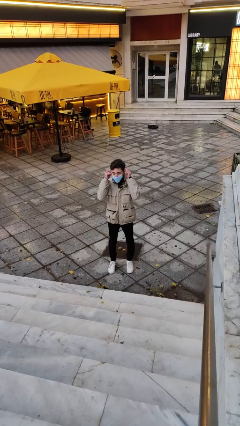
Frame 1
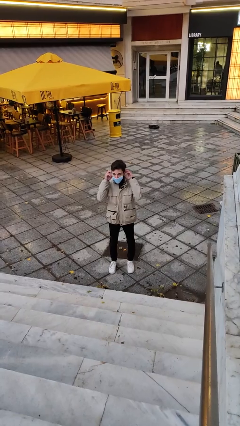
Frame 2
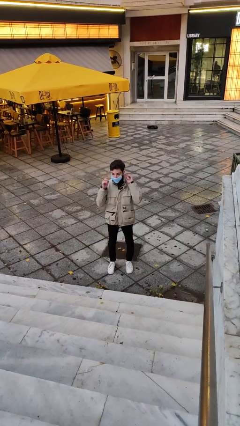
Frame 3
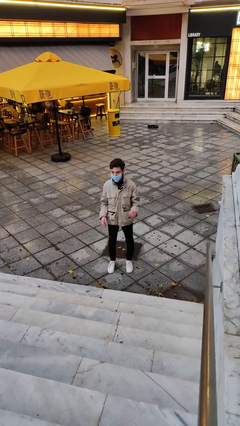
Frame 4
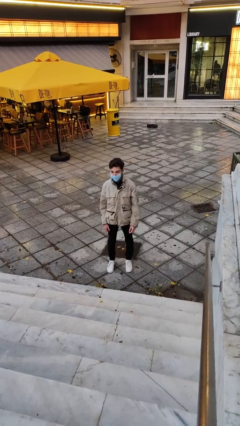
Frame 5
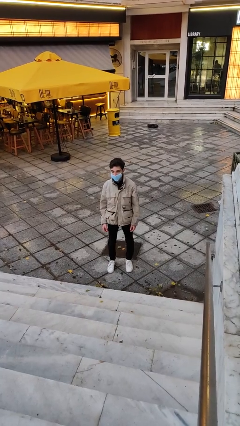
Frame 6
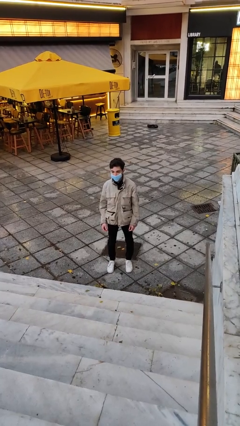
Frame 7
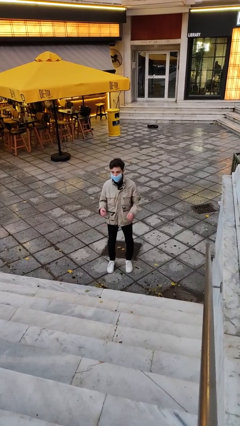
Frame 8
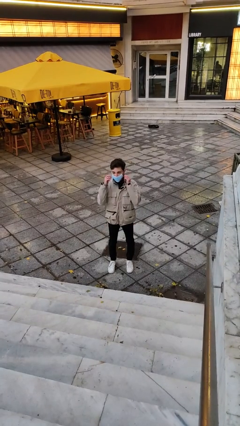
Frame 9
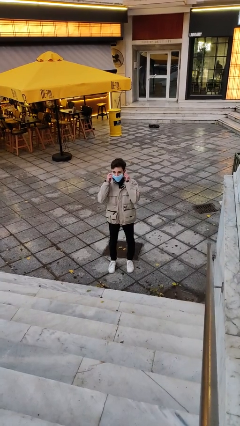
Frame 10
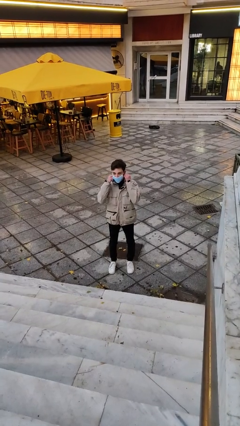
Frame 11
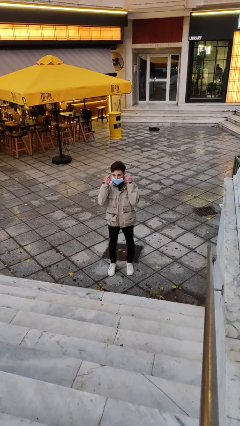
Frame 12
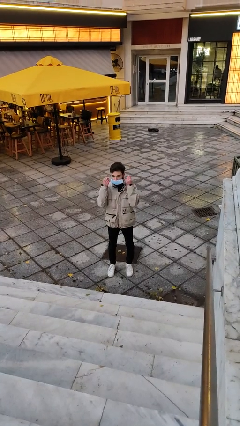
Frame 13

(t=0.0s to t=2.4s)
person puts on facemask

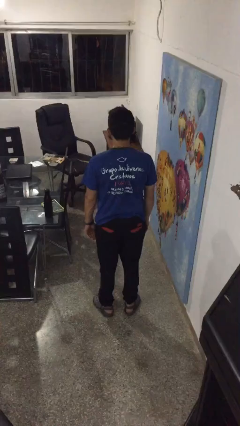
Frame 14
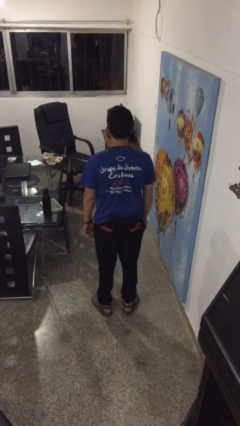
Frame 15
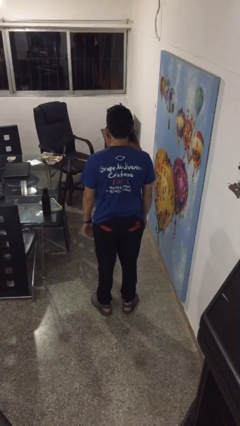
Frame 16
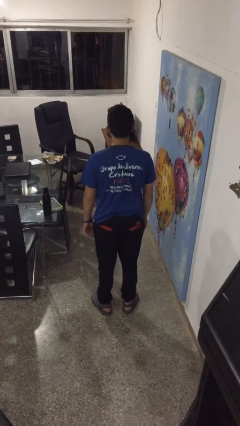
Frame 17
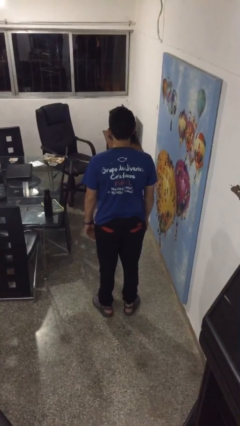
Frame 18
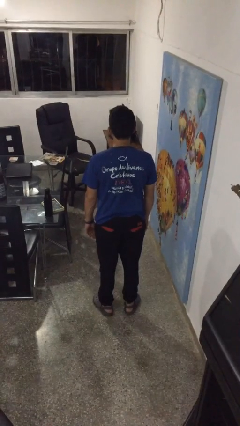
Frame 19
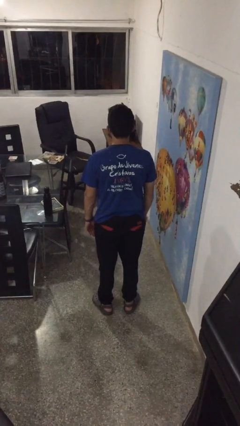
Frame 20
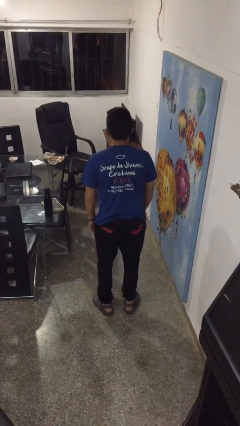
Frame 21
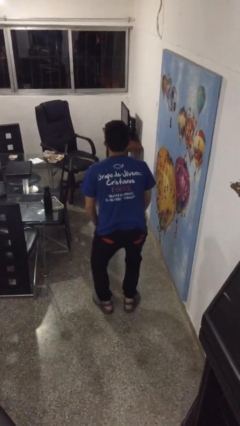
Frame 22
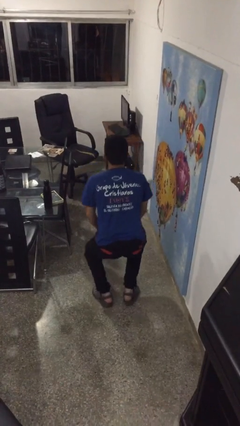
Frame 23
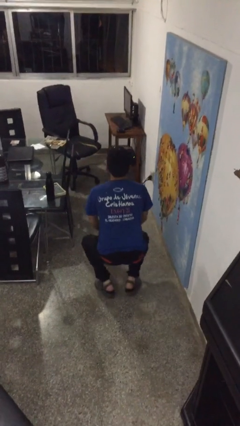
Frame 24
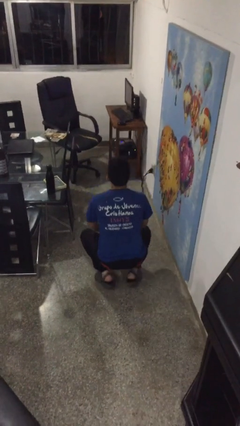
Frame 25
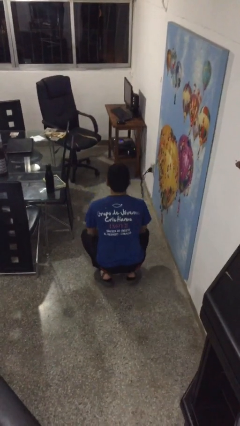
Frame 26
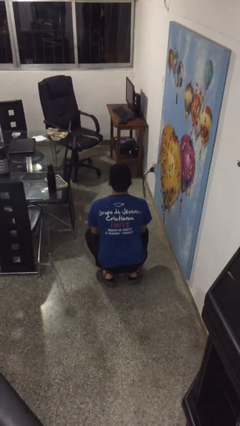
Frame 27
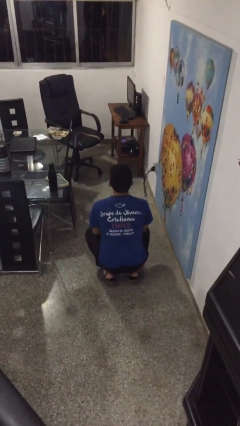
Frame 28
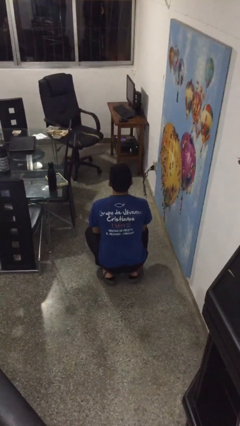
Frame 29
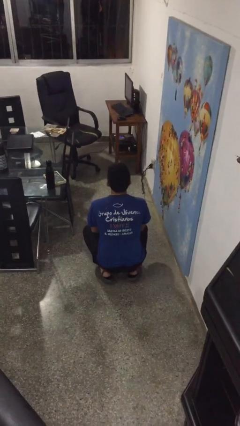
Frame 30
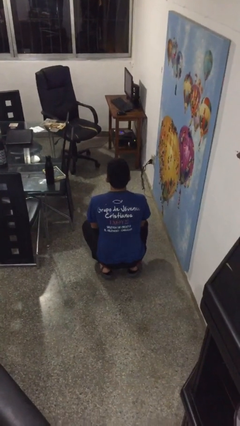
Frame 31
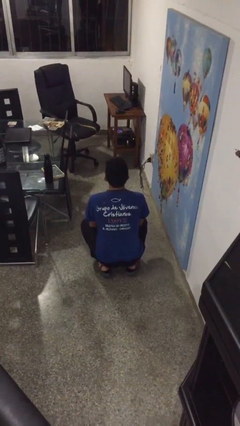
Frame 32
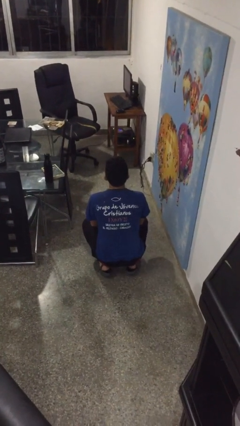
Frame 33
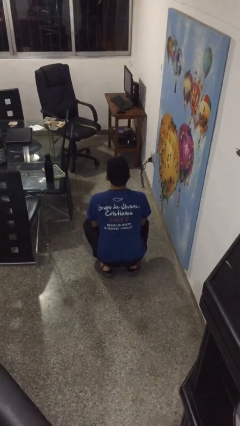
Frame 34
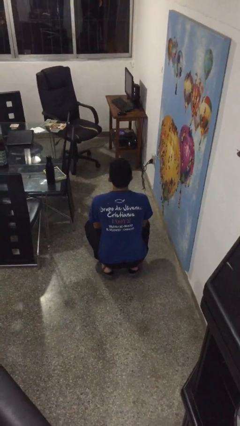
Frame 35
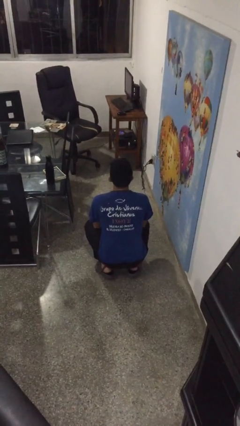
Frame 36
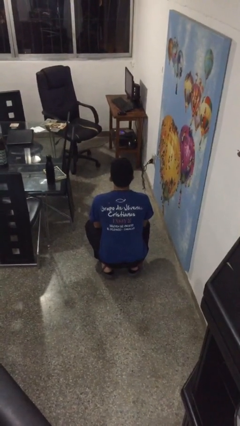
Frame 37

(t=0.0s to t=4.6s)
person squats

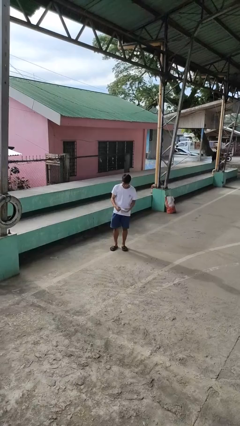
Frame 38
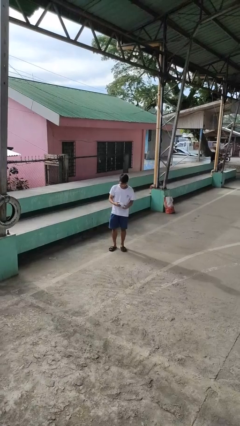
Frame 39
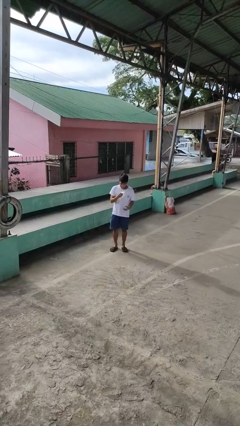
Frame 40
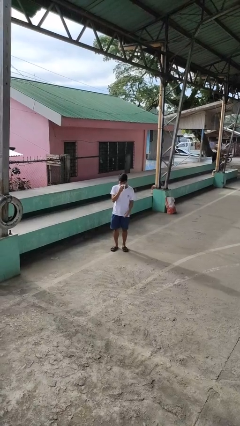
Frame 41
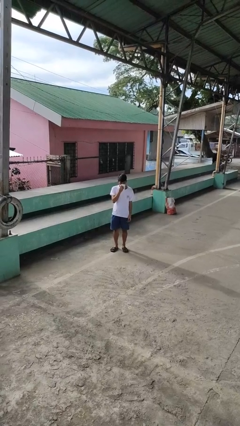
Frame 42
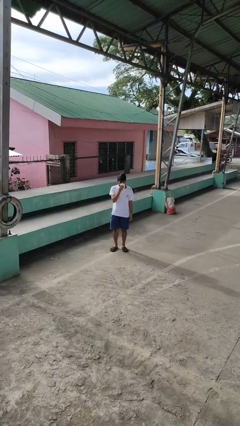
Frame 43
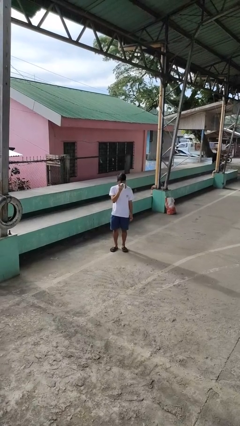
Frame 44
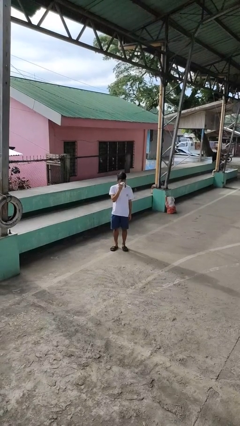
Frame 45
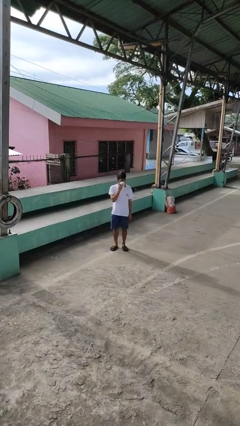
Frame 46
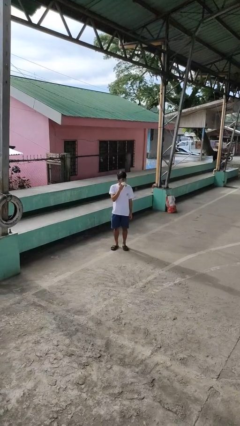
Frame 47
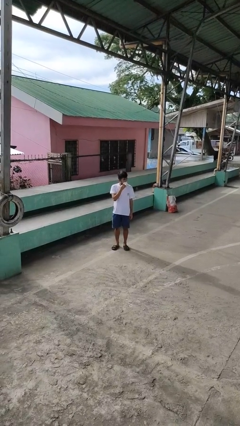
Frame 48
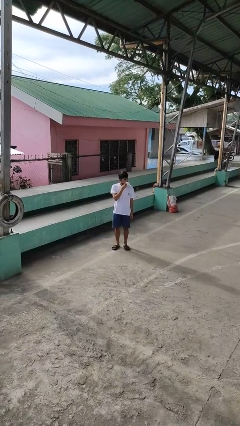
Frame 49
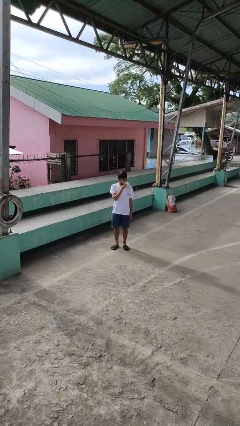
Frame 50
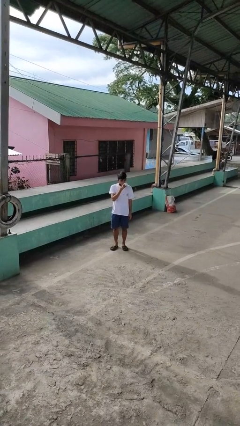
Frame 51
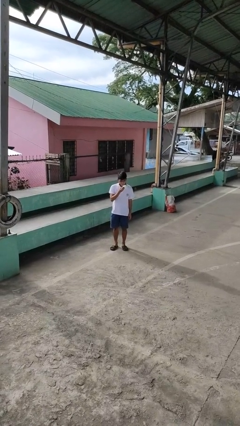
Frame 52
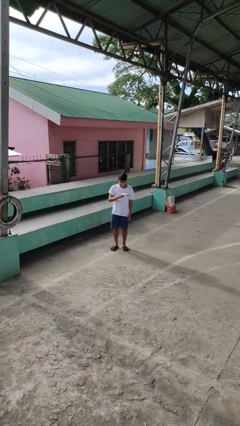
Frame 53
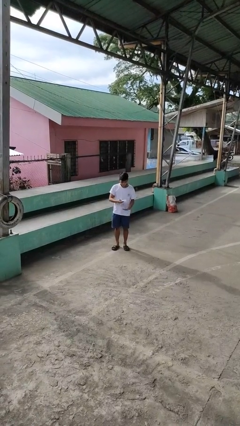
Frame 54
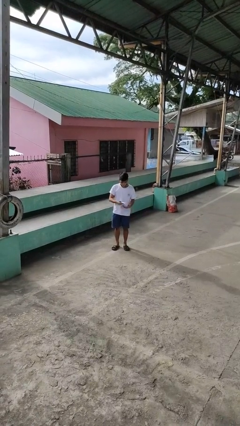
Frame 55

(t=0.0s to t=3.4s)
person wipes mouth with napkin

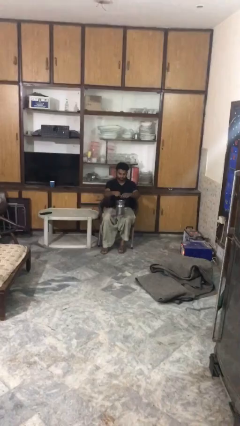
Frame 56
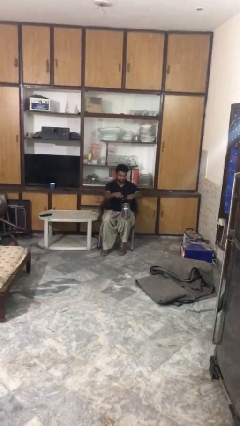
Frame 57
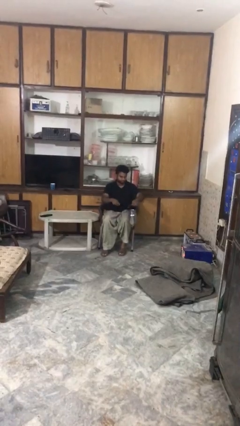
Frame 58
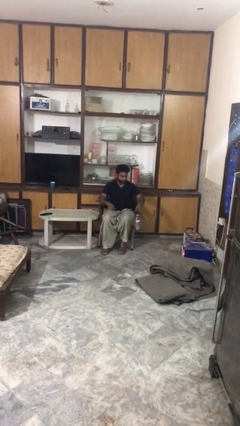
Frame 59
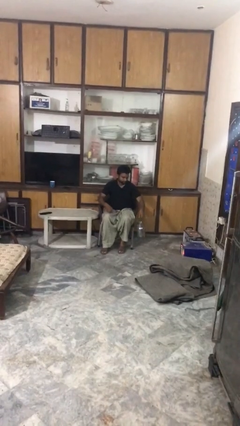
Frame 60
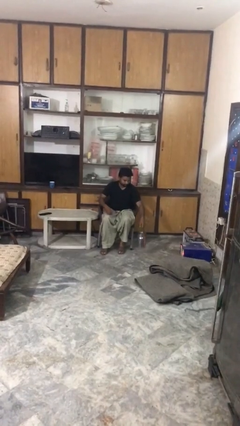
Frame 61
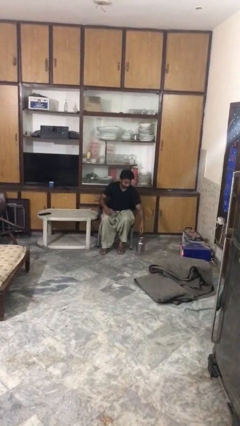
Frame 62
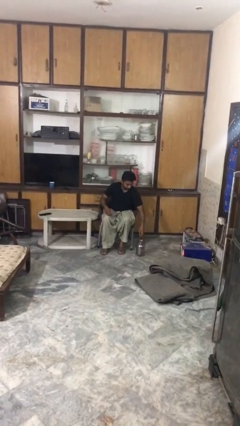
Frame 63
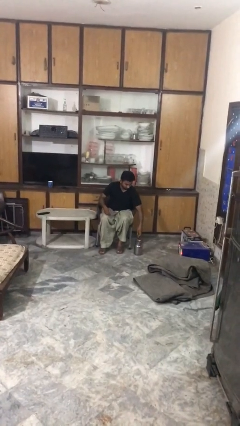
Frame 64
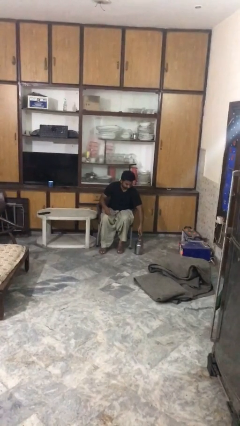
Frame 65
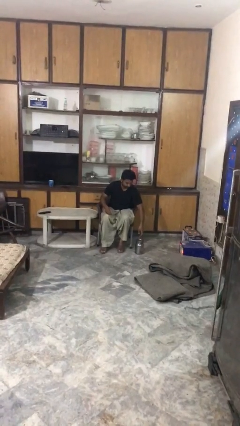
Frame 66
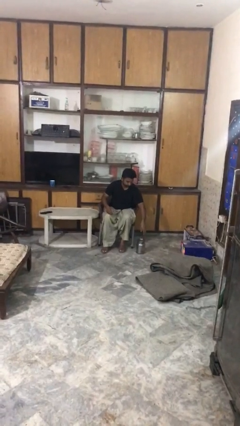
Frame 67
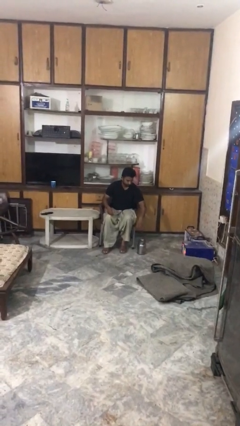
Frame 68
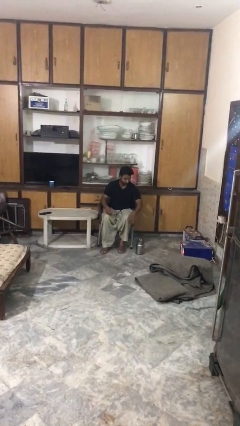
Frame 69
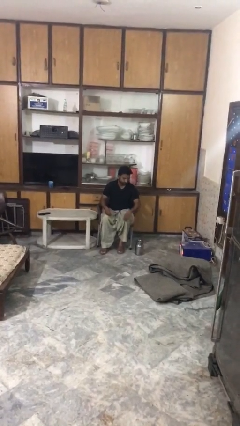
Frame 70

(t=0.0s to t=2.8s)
person puts down object on floor

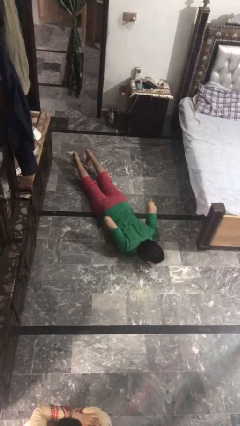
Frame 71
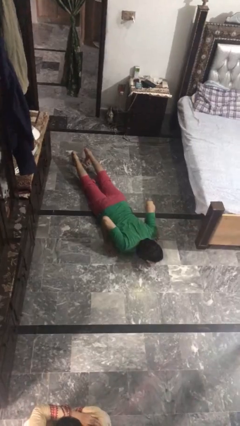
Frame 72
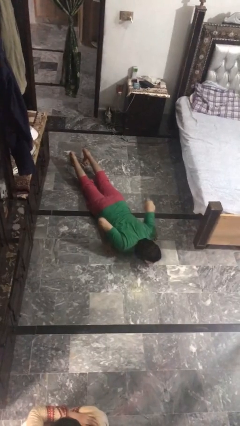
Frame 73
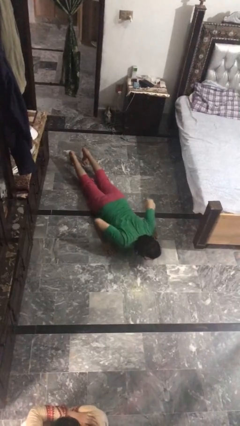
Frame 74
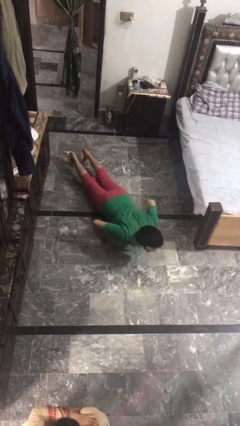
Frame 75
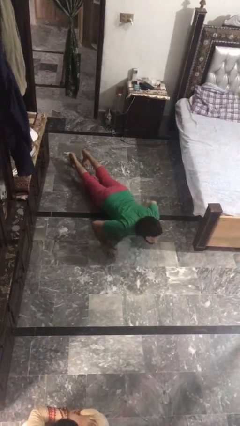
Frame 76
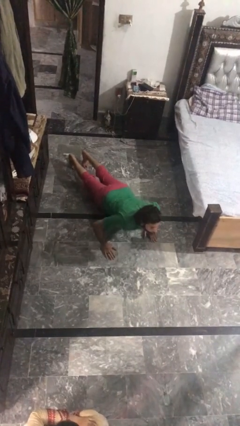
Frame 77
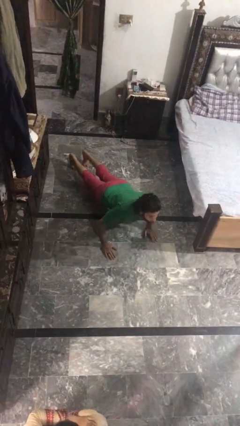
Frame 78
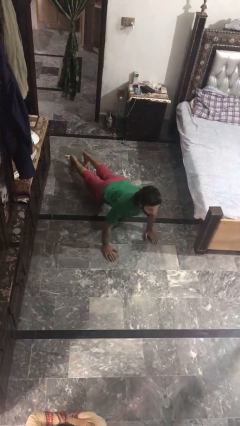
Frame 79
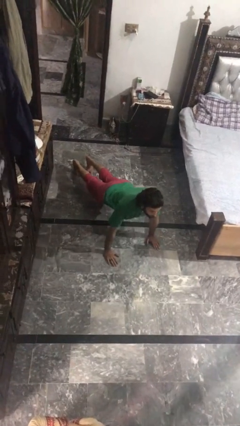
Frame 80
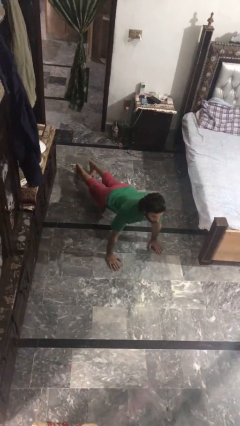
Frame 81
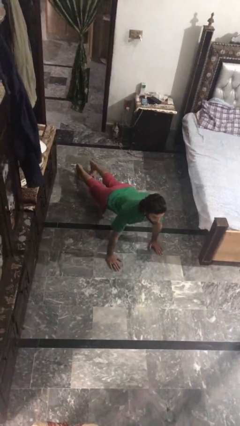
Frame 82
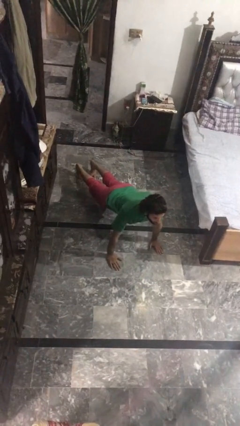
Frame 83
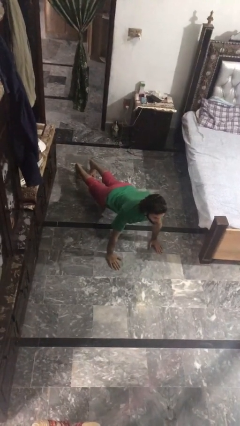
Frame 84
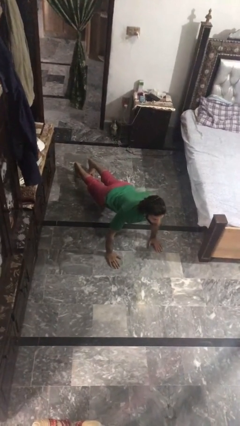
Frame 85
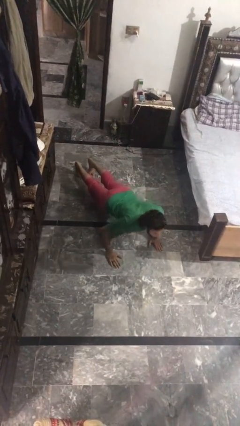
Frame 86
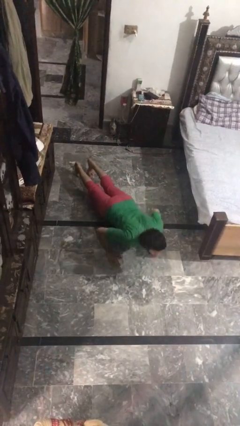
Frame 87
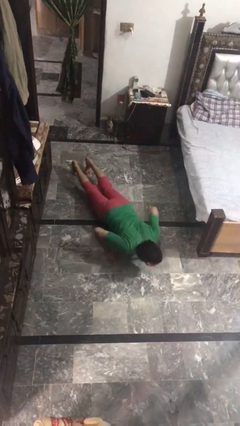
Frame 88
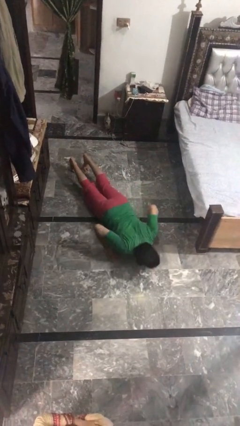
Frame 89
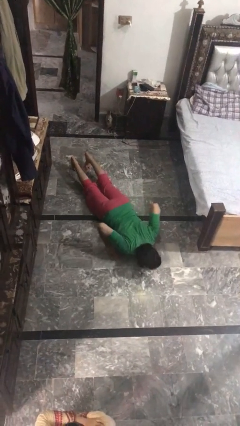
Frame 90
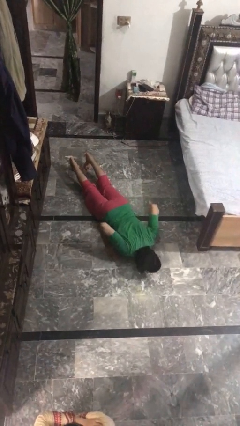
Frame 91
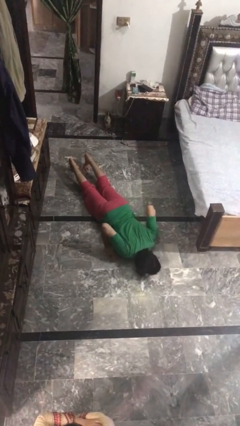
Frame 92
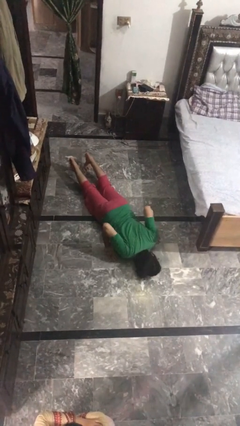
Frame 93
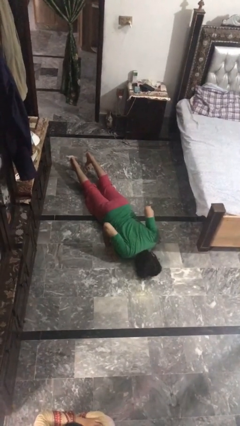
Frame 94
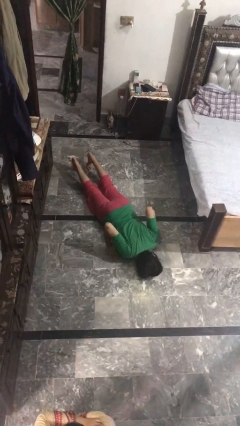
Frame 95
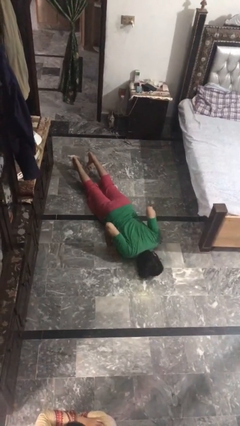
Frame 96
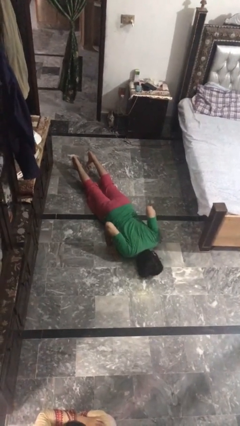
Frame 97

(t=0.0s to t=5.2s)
person exercises with pushup
